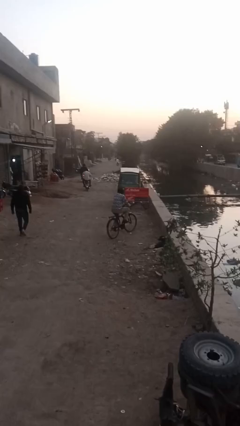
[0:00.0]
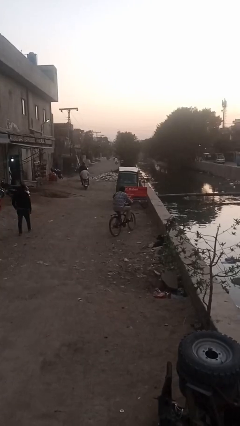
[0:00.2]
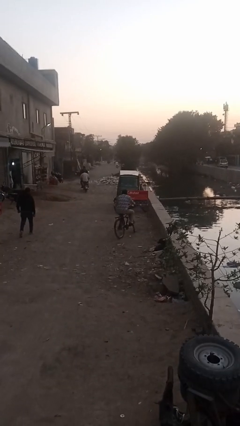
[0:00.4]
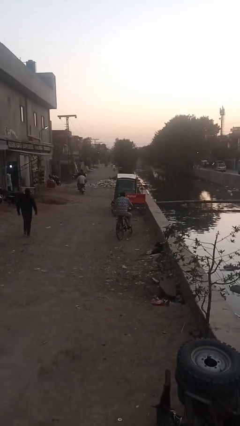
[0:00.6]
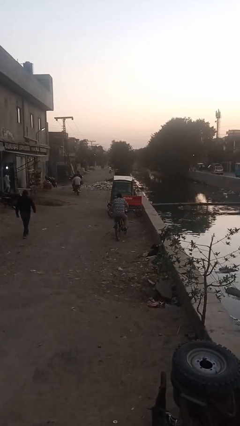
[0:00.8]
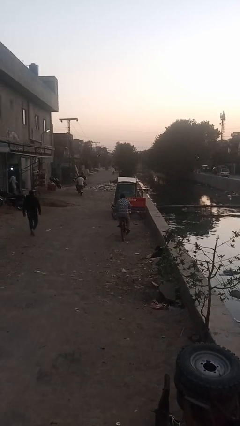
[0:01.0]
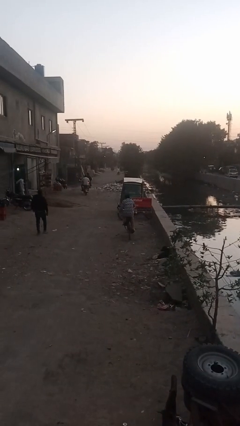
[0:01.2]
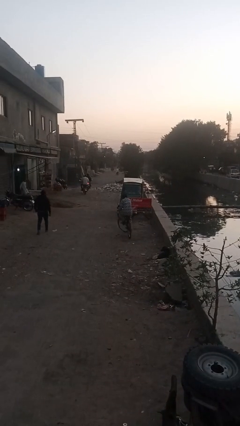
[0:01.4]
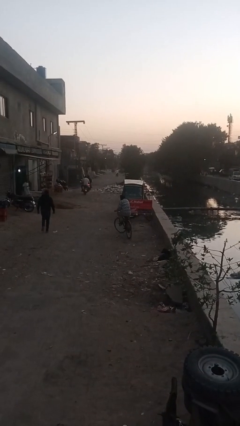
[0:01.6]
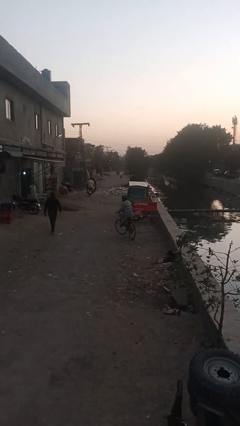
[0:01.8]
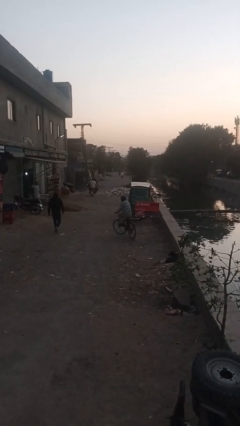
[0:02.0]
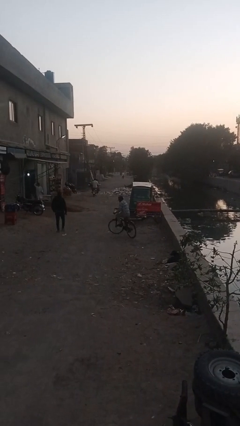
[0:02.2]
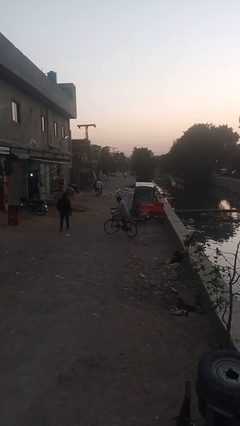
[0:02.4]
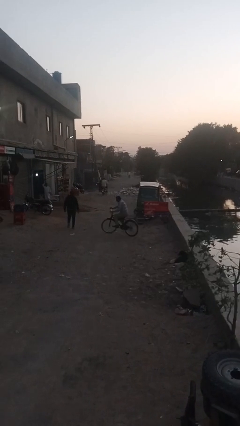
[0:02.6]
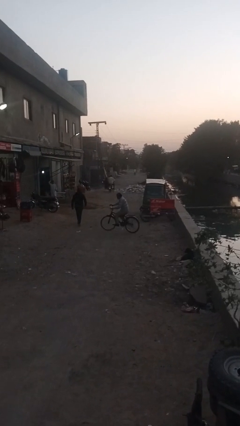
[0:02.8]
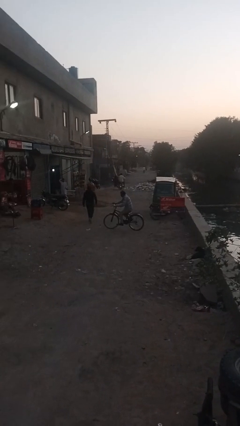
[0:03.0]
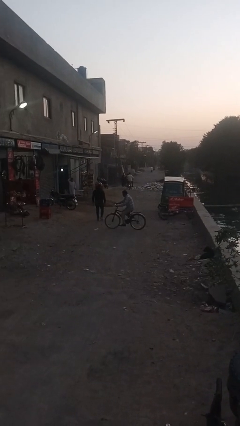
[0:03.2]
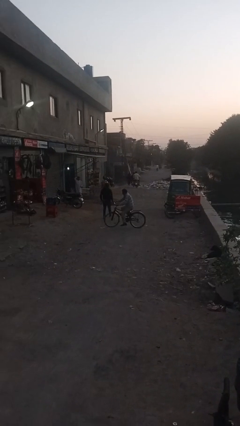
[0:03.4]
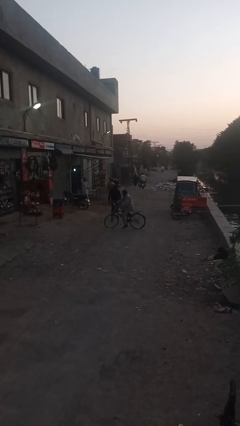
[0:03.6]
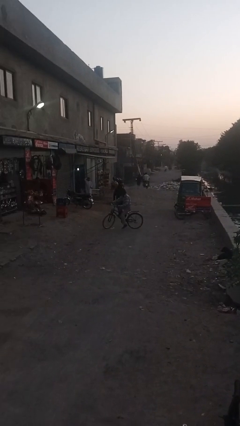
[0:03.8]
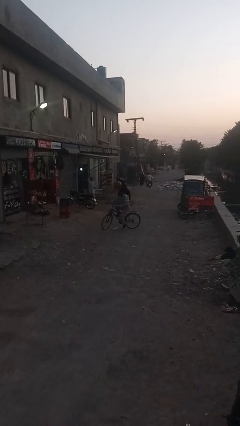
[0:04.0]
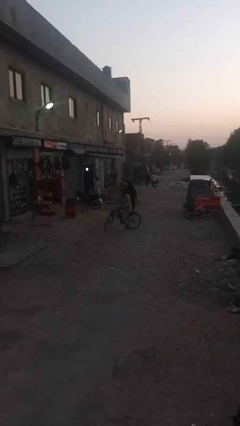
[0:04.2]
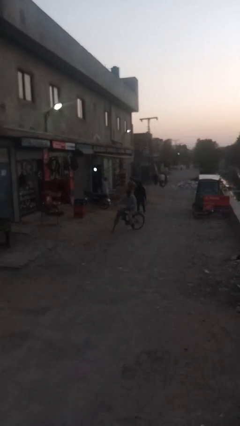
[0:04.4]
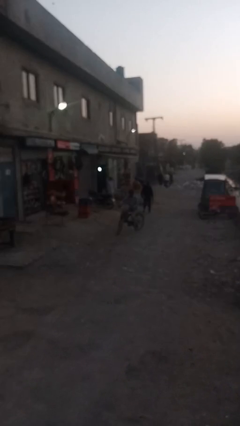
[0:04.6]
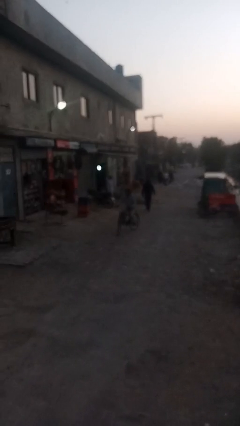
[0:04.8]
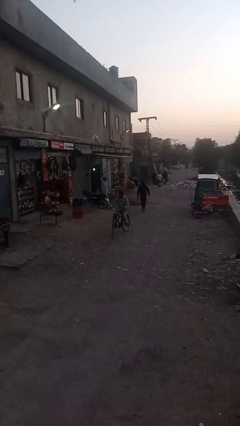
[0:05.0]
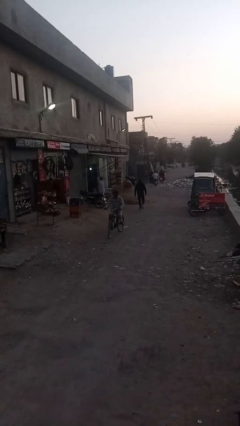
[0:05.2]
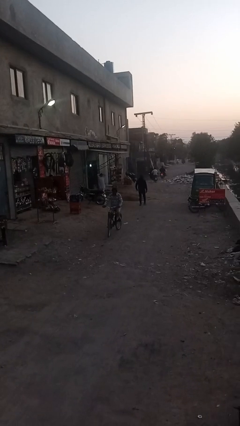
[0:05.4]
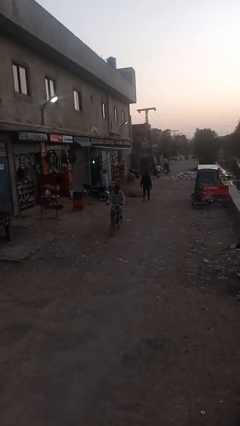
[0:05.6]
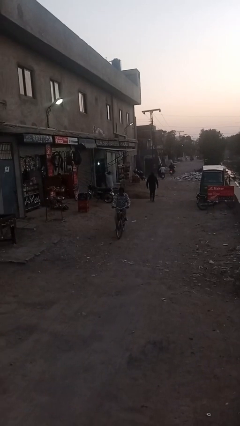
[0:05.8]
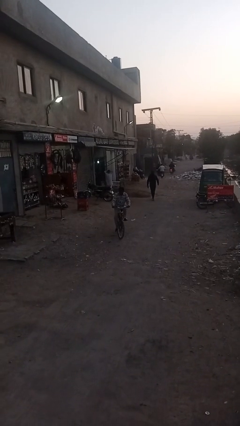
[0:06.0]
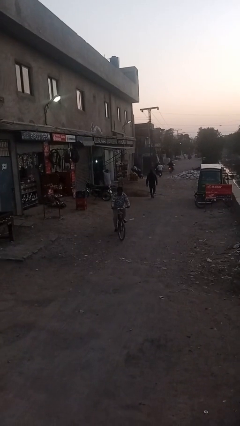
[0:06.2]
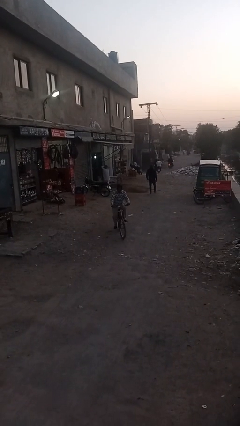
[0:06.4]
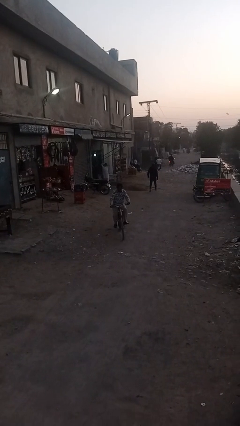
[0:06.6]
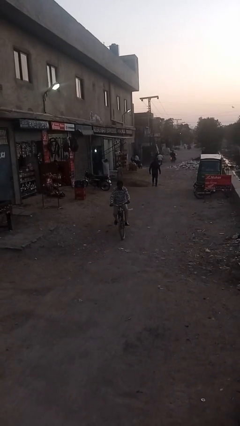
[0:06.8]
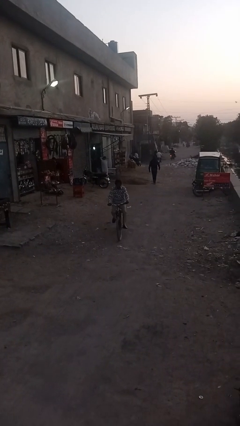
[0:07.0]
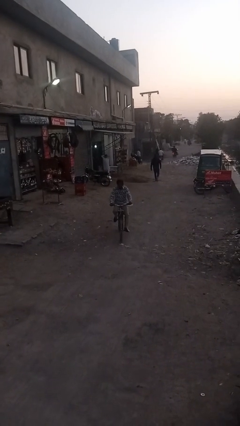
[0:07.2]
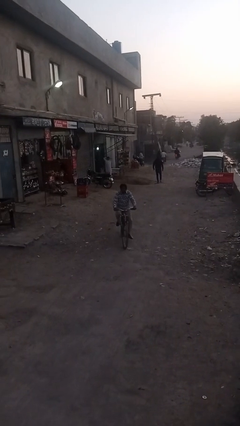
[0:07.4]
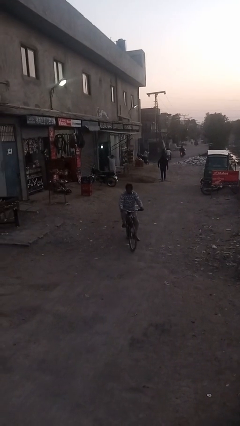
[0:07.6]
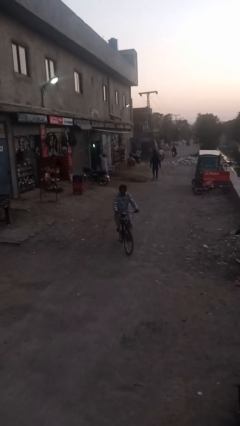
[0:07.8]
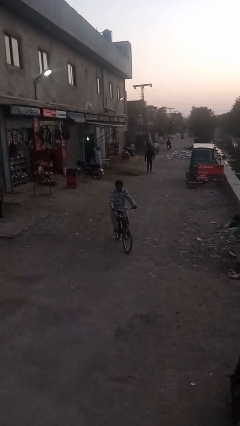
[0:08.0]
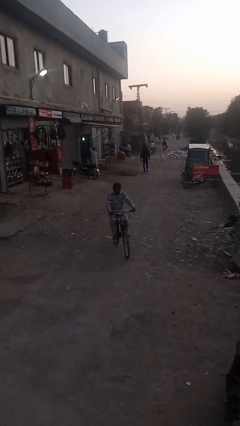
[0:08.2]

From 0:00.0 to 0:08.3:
person rides bicycle

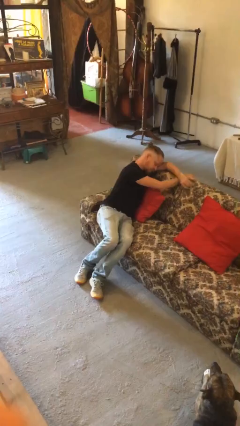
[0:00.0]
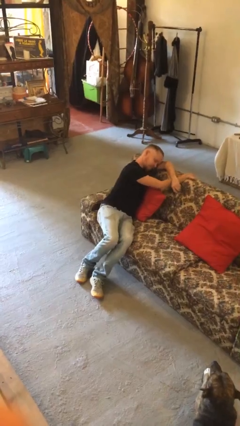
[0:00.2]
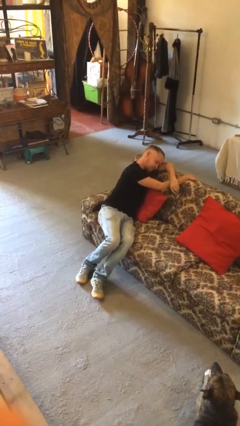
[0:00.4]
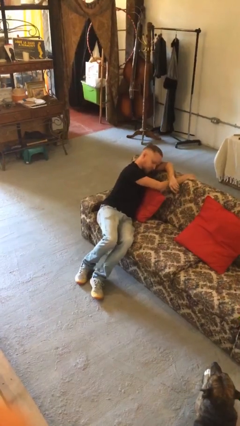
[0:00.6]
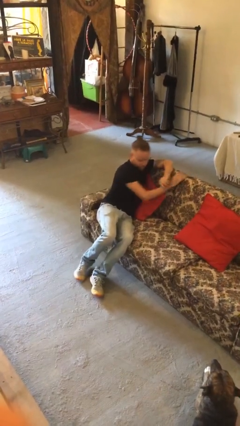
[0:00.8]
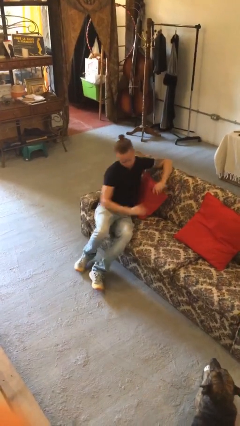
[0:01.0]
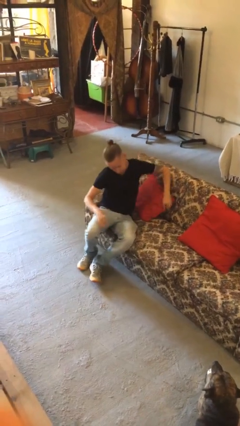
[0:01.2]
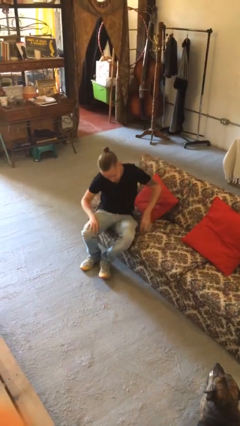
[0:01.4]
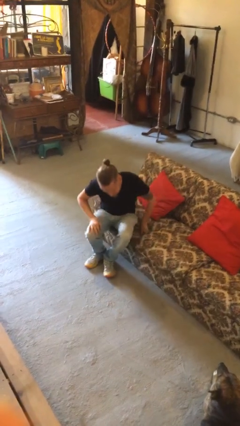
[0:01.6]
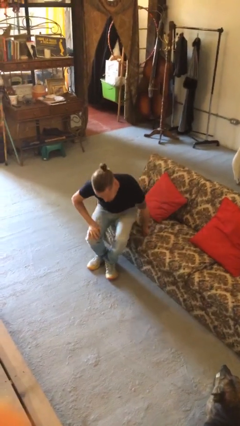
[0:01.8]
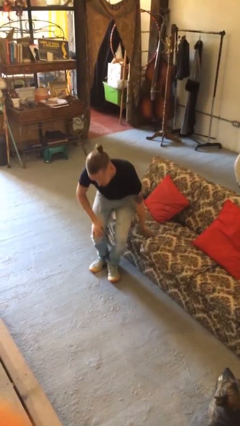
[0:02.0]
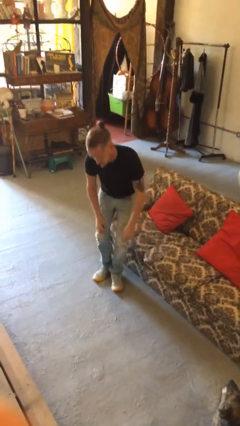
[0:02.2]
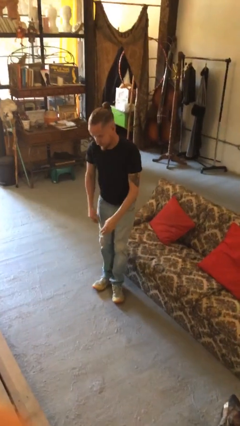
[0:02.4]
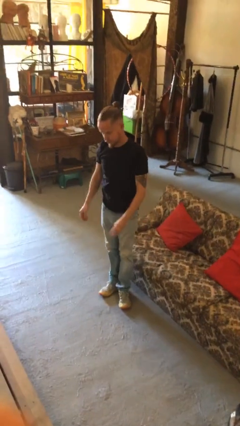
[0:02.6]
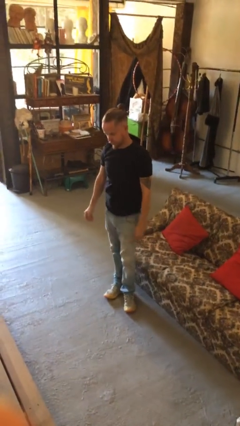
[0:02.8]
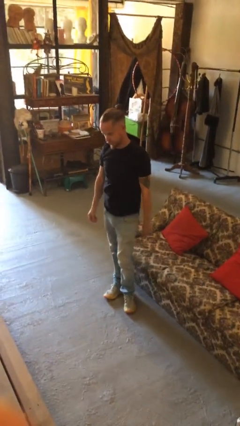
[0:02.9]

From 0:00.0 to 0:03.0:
person stands up

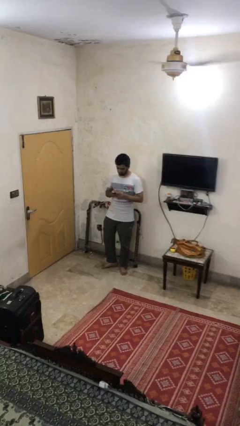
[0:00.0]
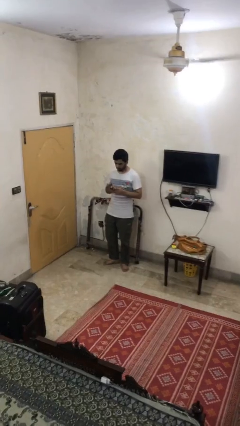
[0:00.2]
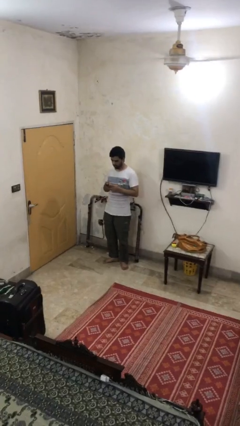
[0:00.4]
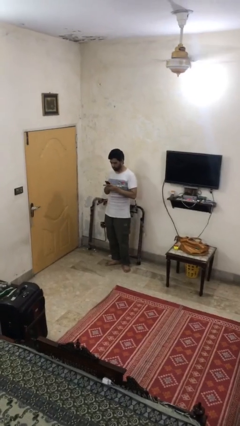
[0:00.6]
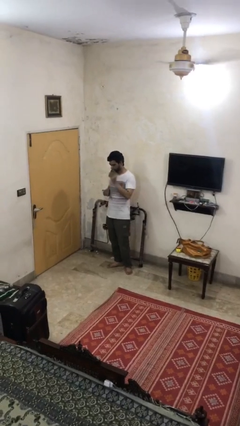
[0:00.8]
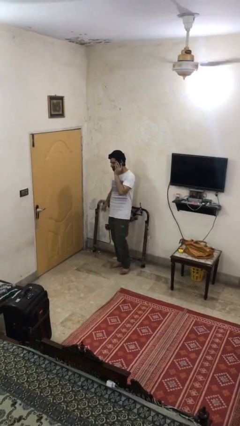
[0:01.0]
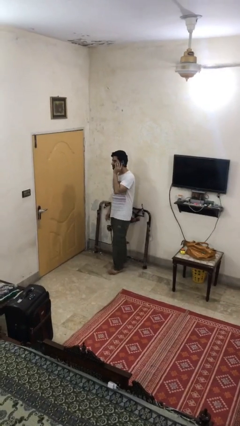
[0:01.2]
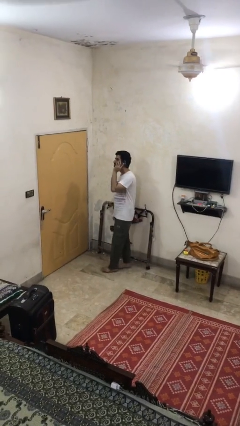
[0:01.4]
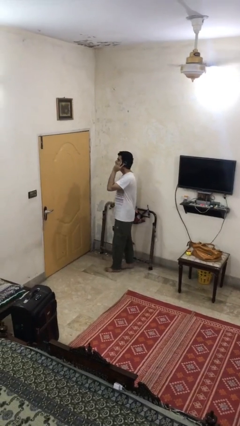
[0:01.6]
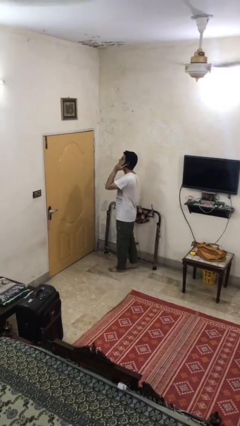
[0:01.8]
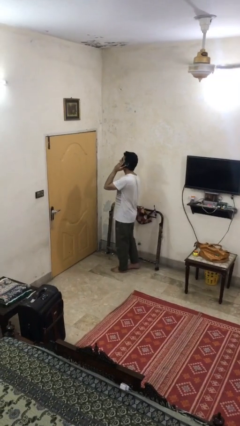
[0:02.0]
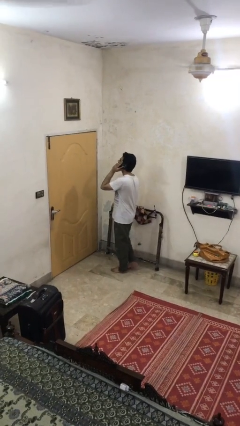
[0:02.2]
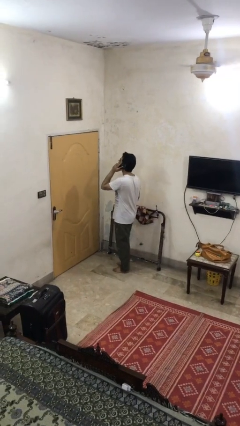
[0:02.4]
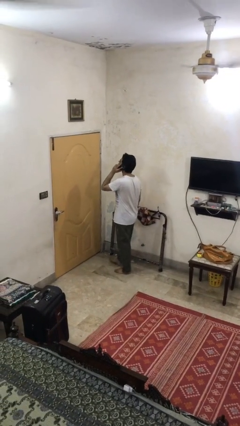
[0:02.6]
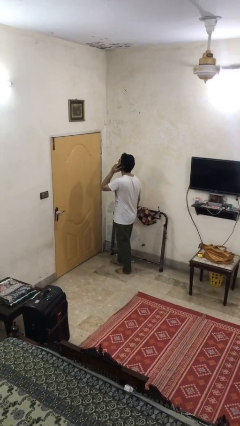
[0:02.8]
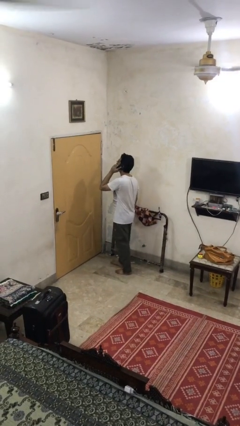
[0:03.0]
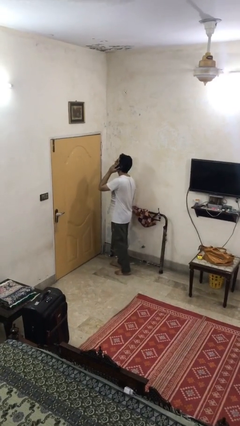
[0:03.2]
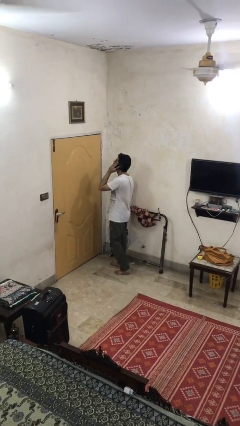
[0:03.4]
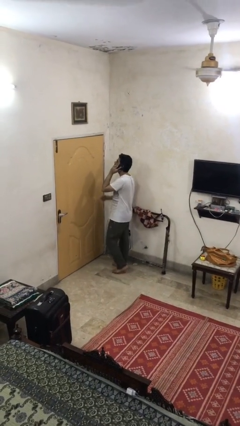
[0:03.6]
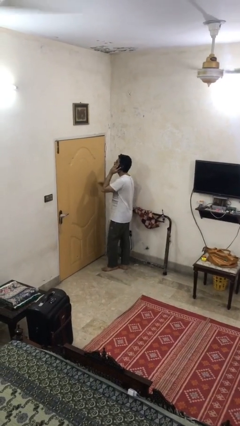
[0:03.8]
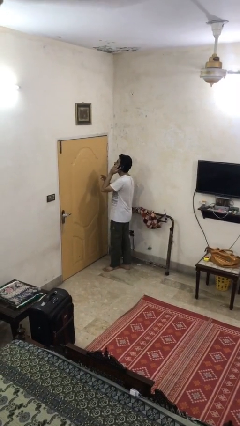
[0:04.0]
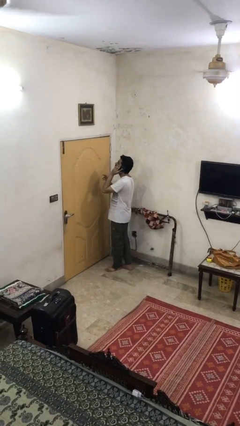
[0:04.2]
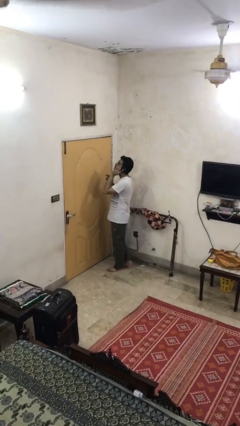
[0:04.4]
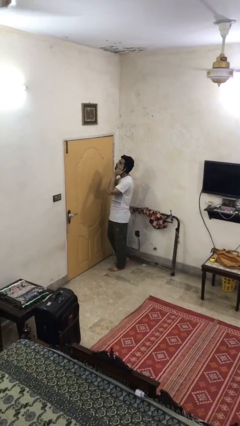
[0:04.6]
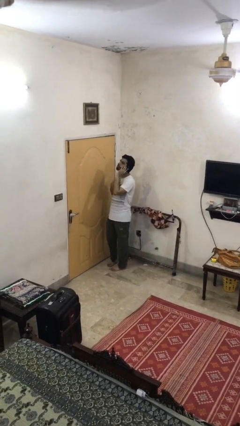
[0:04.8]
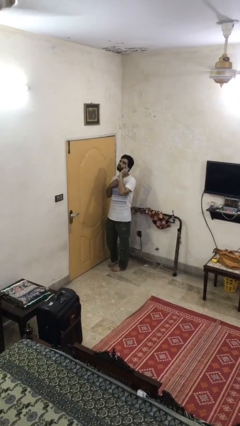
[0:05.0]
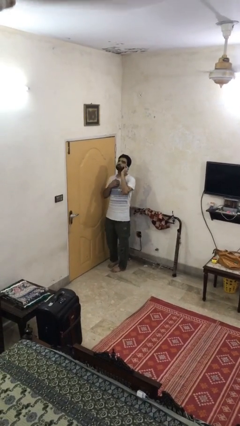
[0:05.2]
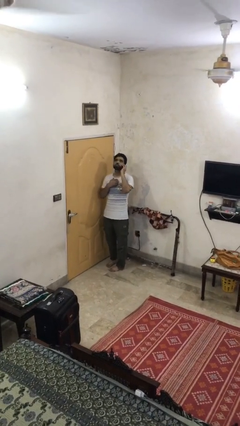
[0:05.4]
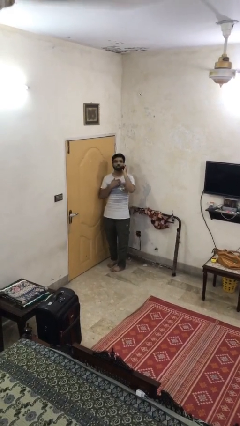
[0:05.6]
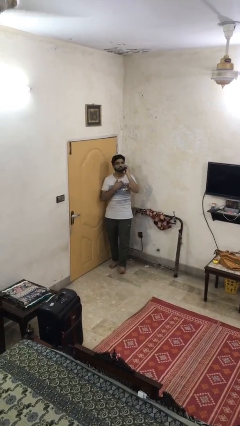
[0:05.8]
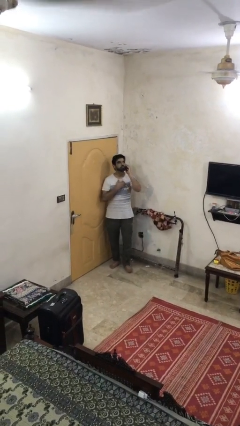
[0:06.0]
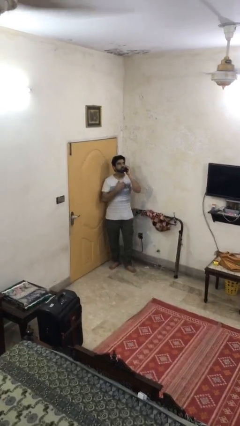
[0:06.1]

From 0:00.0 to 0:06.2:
person talks on phone

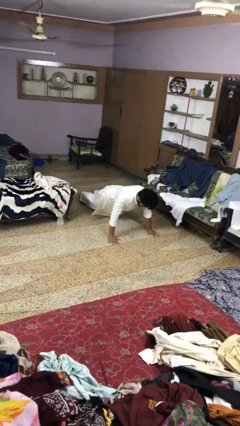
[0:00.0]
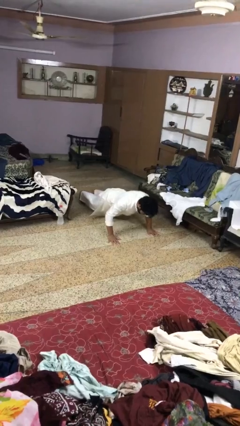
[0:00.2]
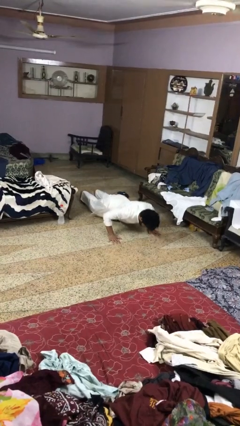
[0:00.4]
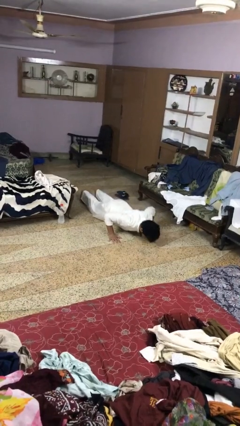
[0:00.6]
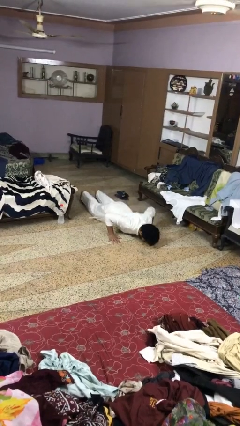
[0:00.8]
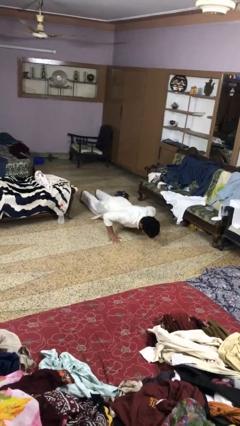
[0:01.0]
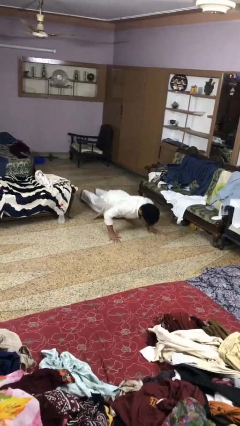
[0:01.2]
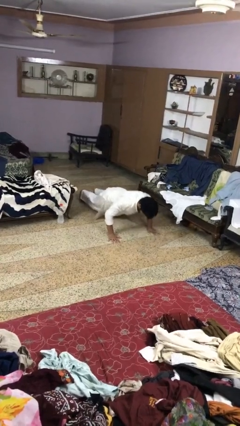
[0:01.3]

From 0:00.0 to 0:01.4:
person exercises with pushup
